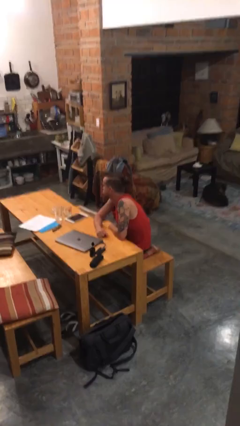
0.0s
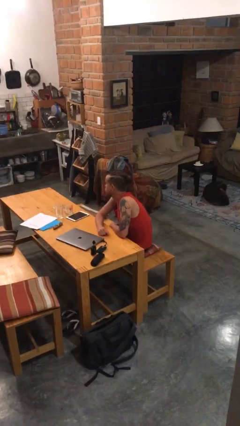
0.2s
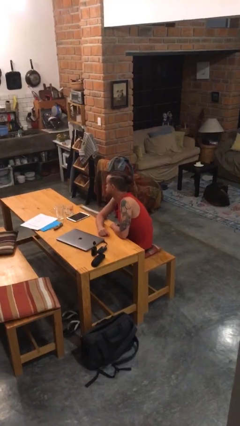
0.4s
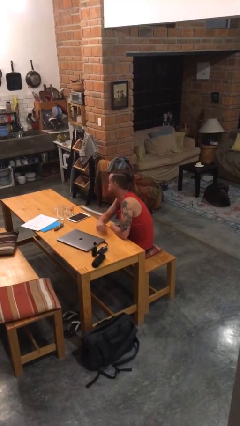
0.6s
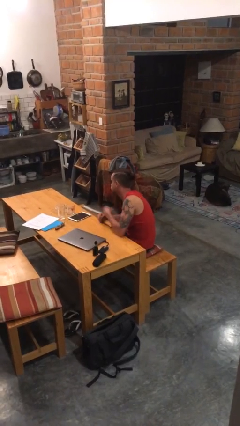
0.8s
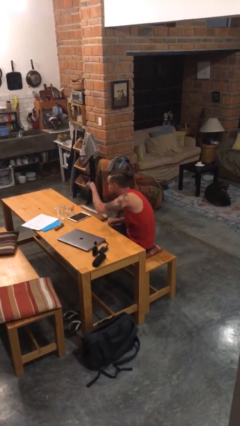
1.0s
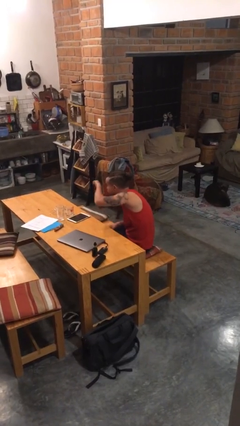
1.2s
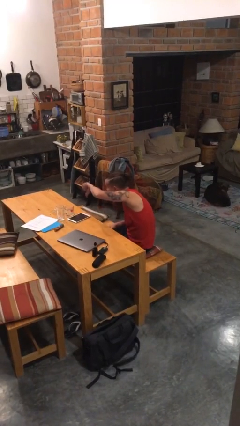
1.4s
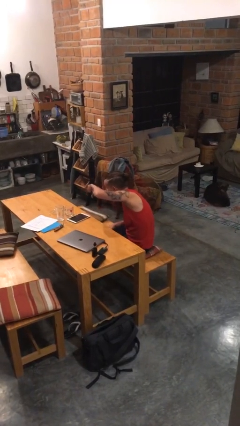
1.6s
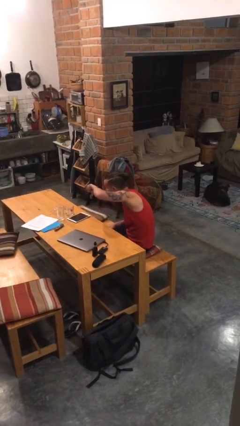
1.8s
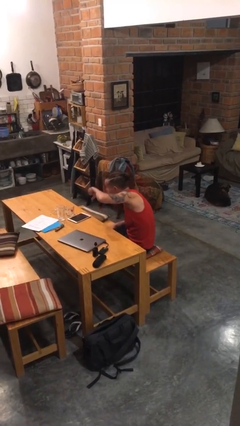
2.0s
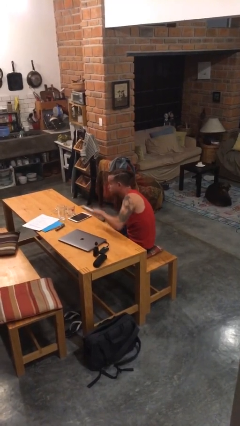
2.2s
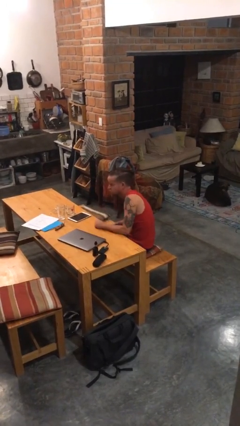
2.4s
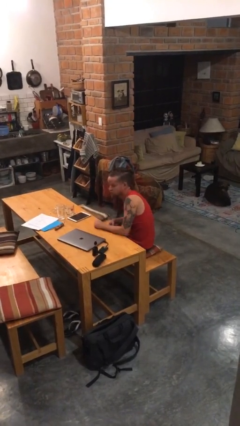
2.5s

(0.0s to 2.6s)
person gestures thumbs down

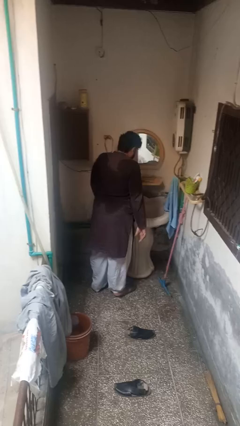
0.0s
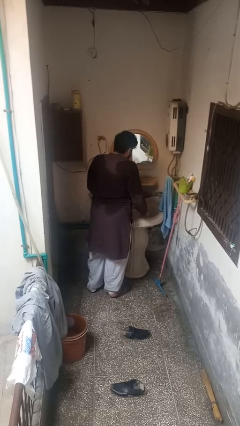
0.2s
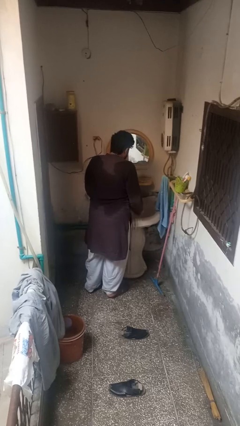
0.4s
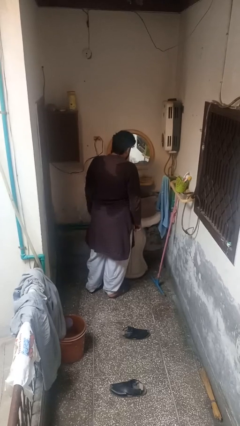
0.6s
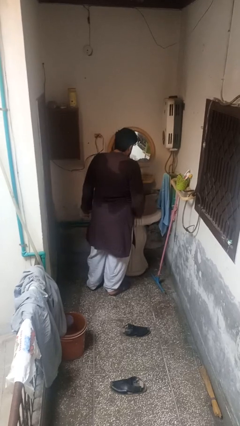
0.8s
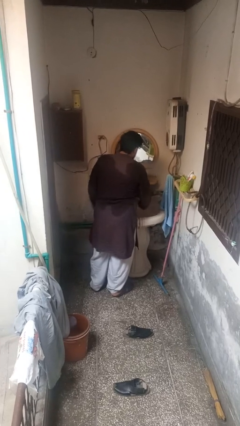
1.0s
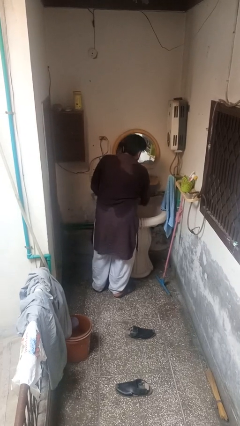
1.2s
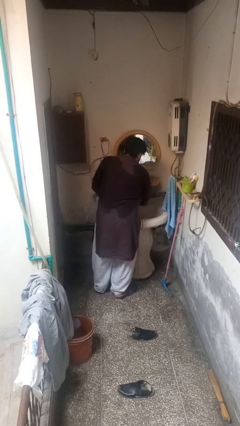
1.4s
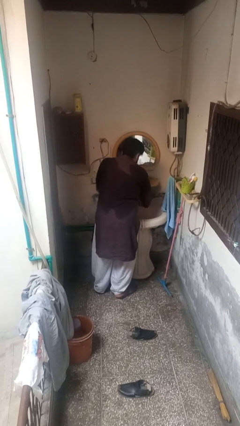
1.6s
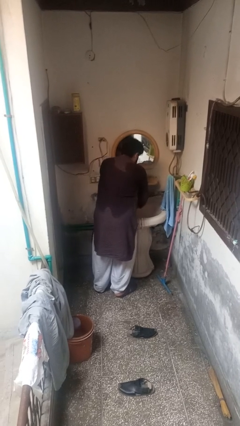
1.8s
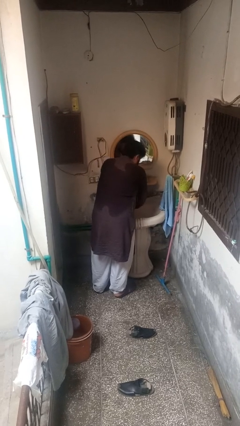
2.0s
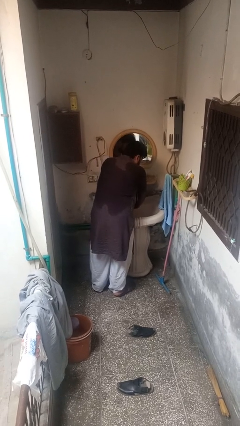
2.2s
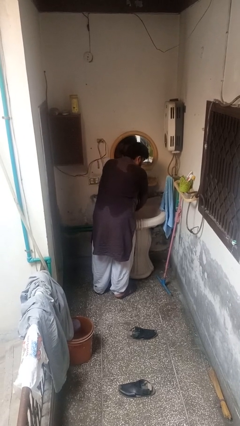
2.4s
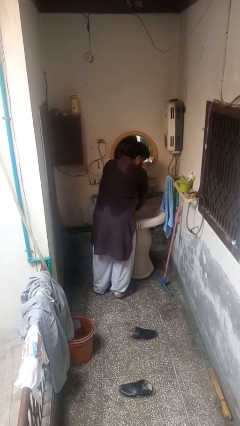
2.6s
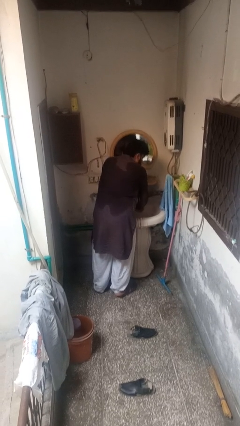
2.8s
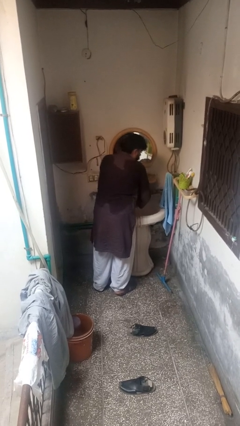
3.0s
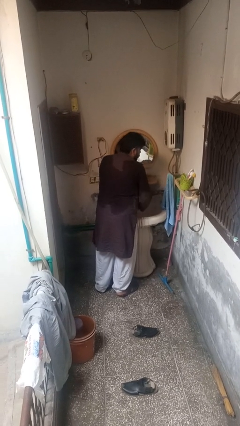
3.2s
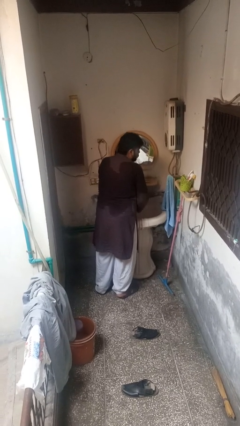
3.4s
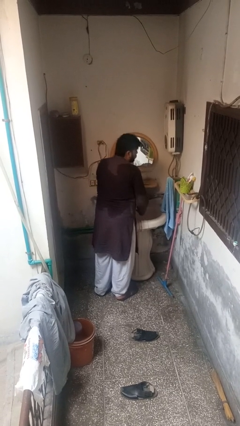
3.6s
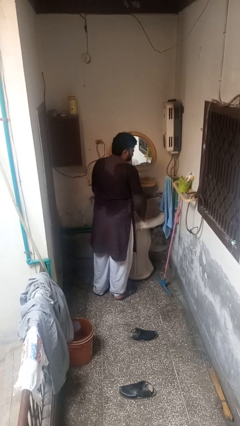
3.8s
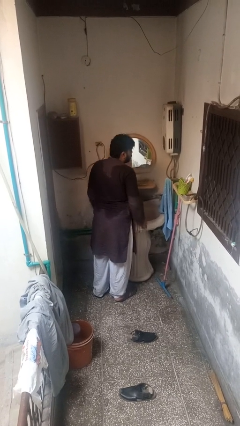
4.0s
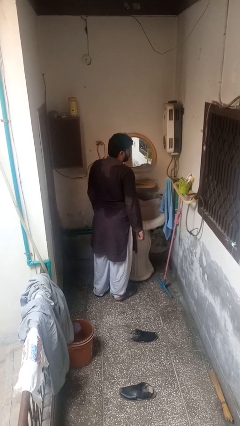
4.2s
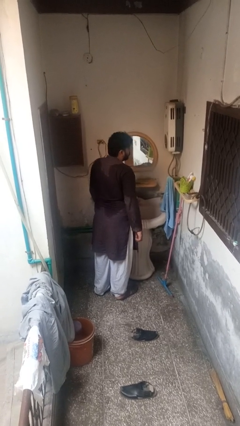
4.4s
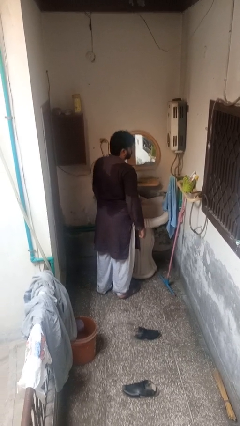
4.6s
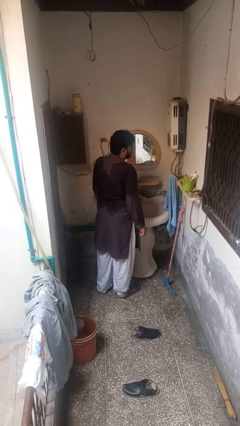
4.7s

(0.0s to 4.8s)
person washes hands

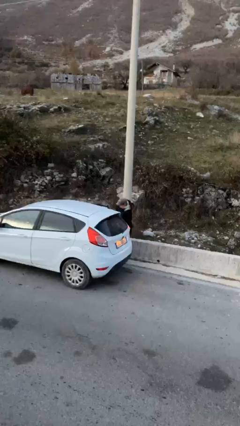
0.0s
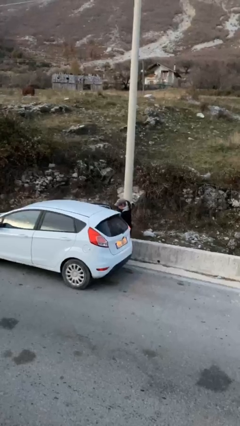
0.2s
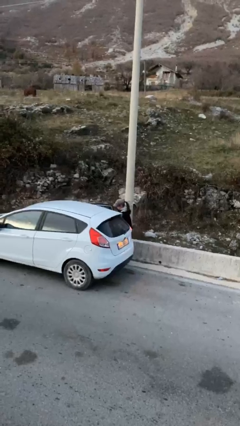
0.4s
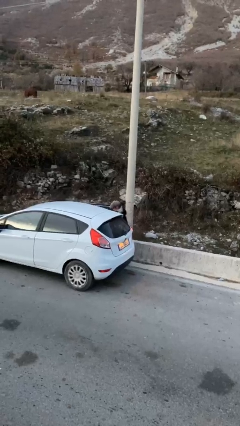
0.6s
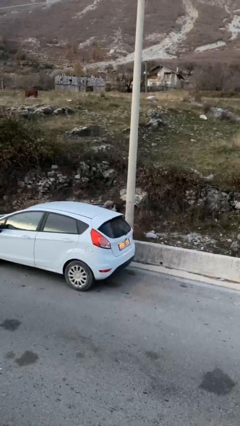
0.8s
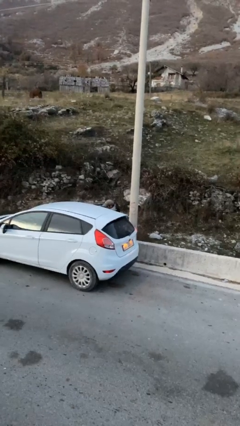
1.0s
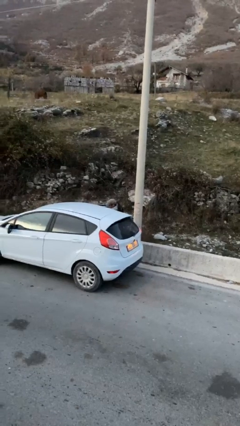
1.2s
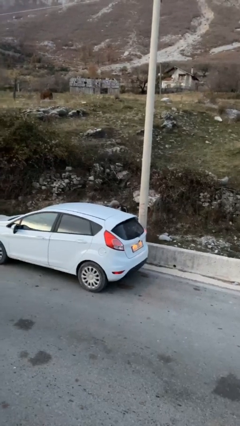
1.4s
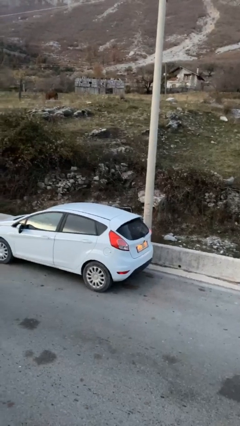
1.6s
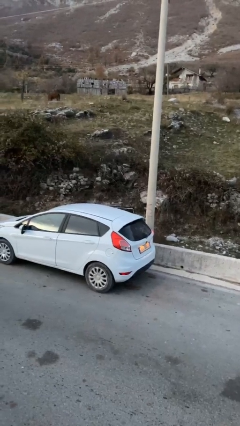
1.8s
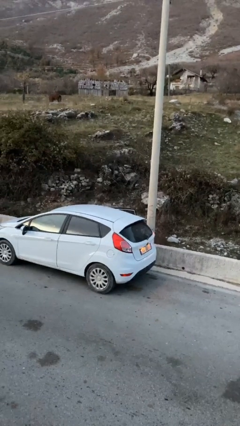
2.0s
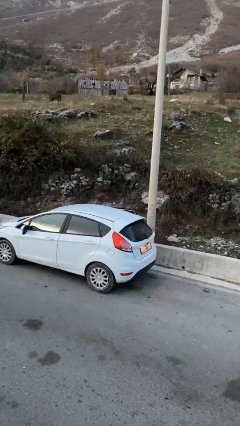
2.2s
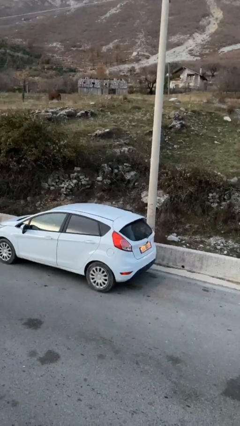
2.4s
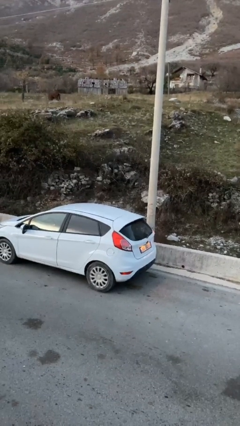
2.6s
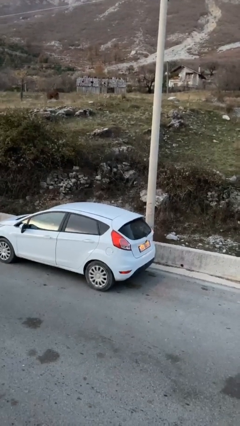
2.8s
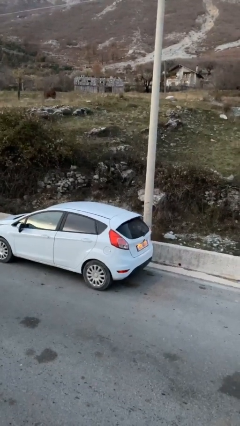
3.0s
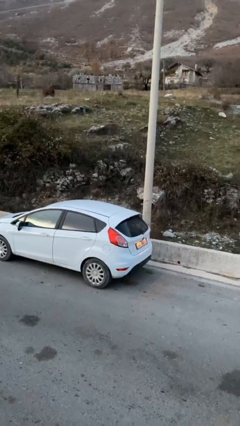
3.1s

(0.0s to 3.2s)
car picks up person

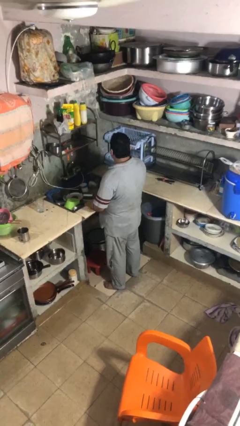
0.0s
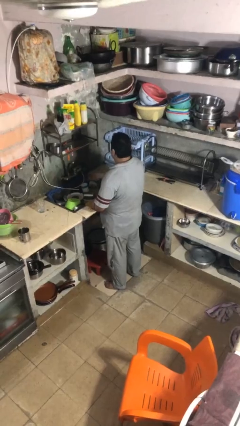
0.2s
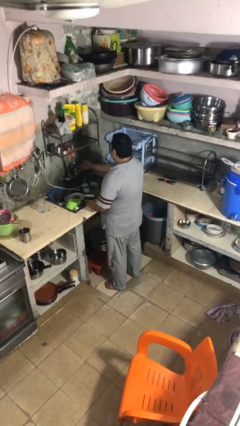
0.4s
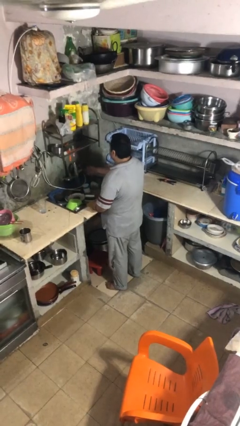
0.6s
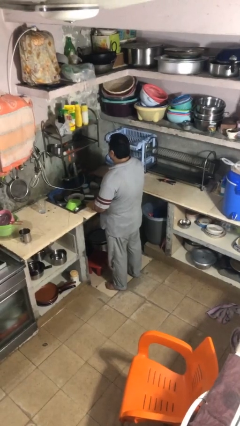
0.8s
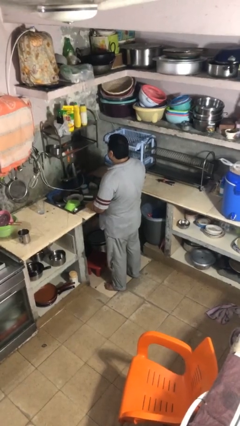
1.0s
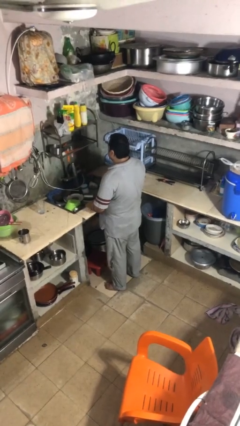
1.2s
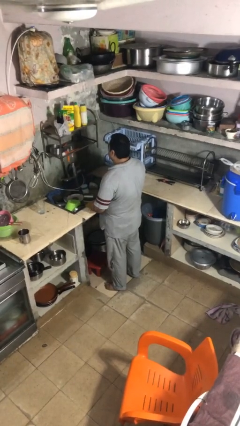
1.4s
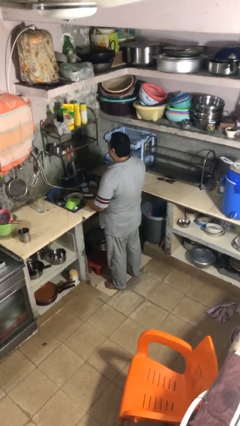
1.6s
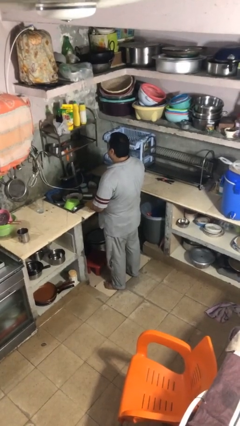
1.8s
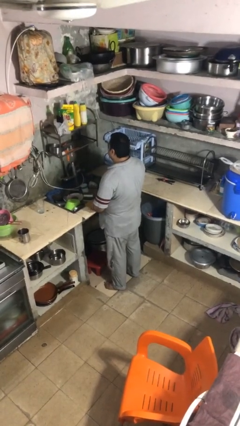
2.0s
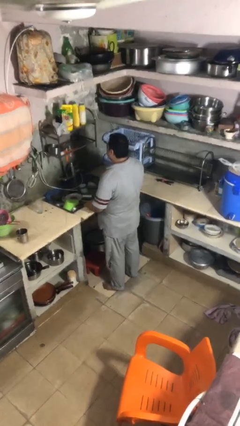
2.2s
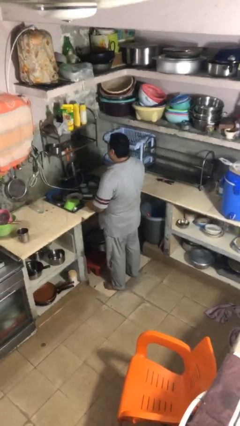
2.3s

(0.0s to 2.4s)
person turns on faucet

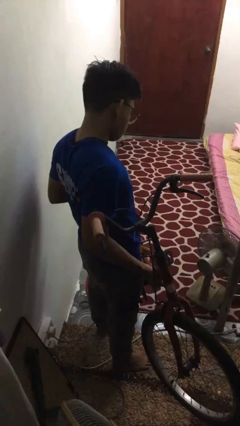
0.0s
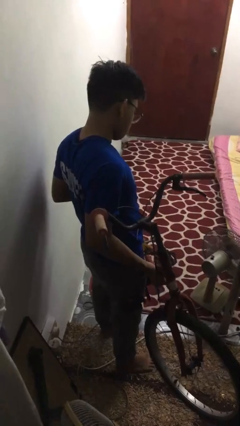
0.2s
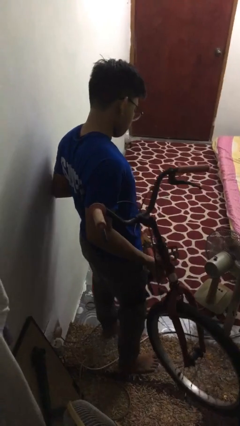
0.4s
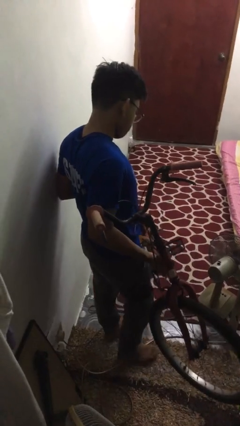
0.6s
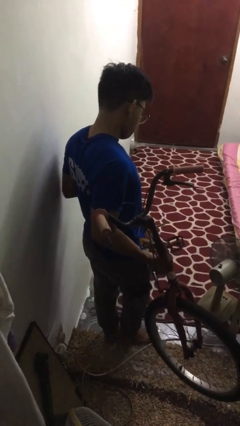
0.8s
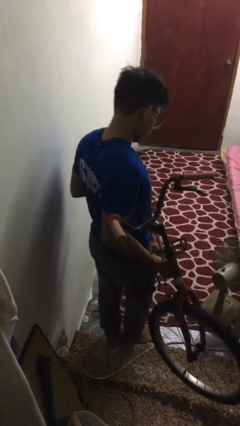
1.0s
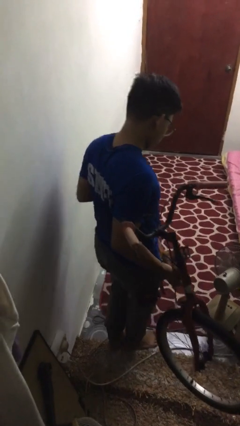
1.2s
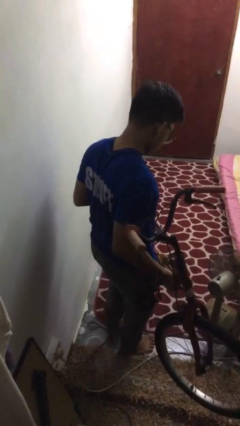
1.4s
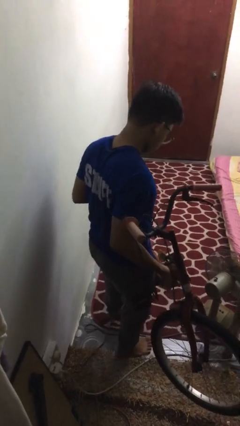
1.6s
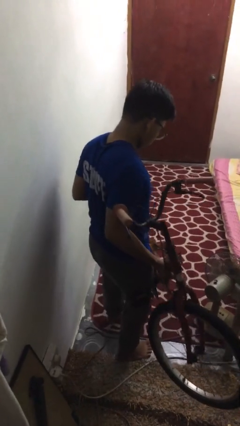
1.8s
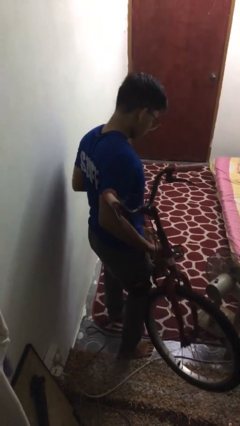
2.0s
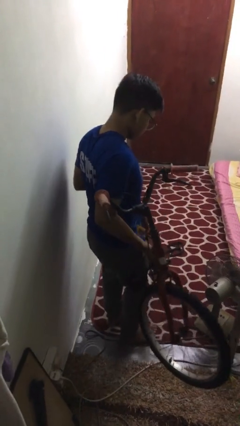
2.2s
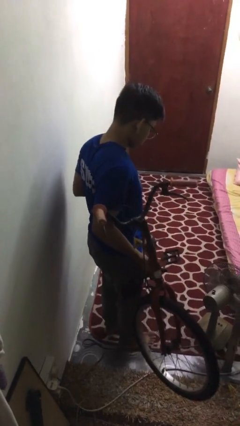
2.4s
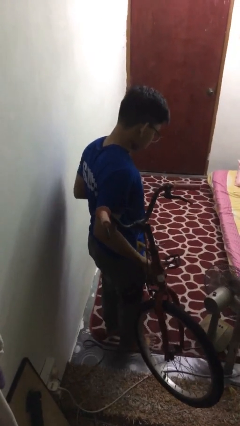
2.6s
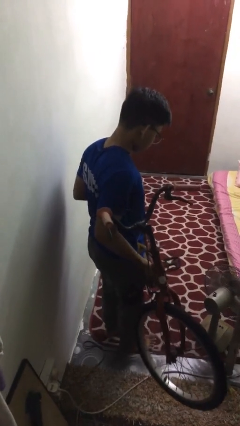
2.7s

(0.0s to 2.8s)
person carries bicycle

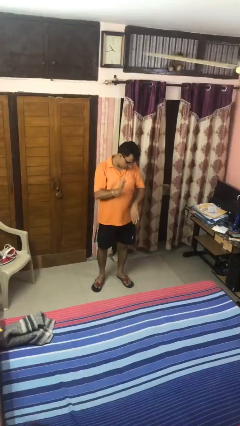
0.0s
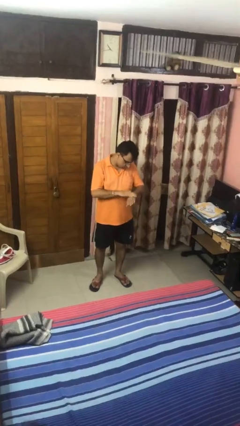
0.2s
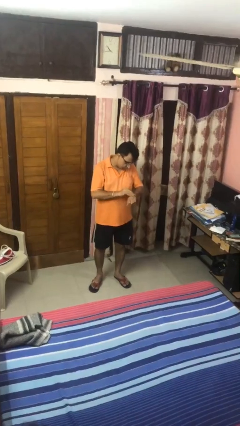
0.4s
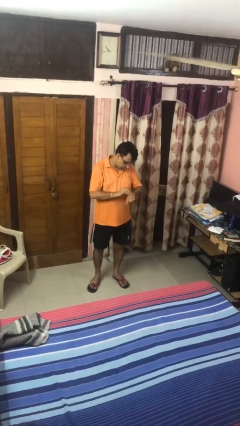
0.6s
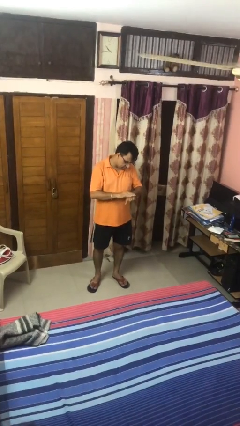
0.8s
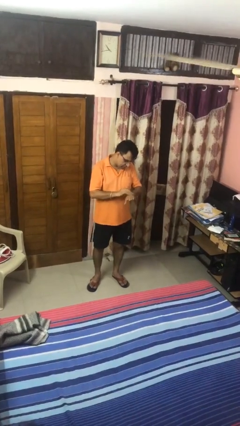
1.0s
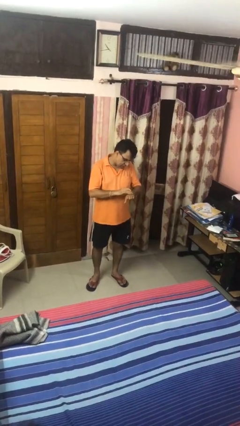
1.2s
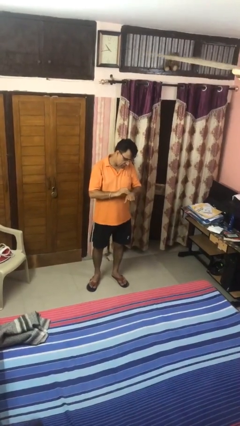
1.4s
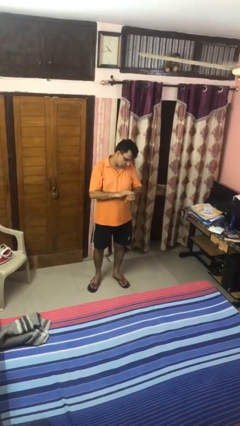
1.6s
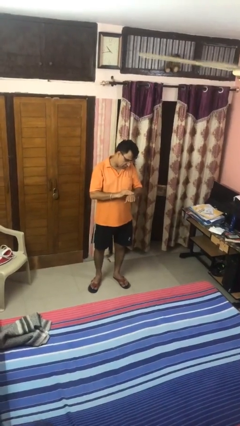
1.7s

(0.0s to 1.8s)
person swats bug
